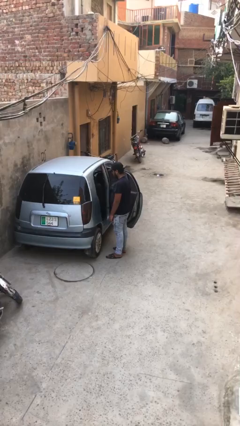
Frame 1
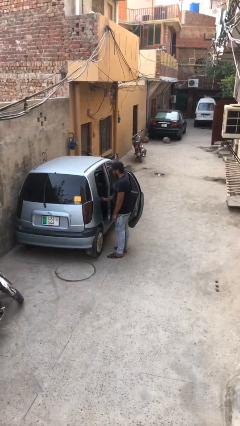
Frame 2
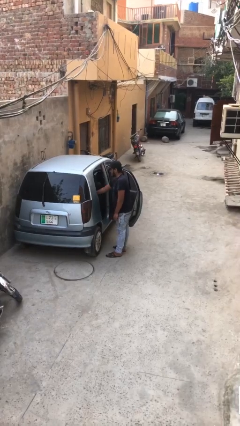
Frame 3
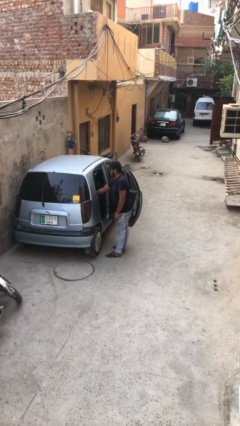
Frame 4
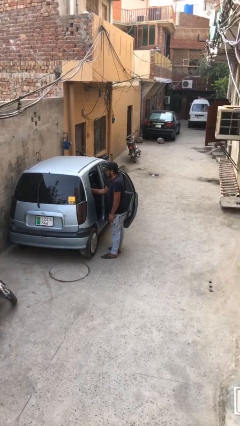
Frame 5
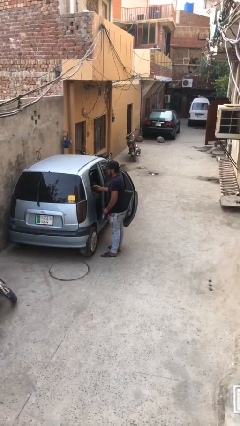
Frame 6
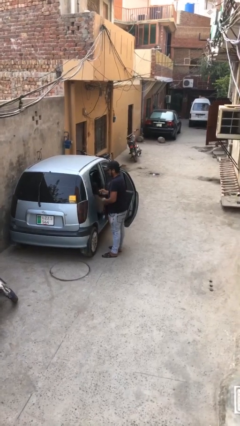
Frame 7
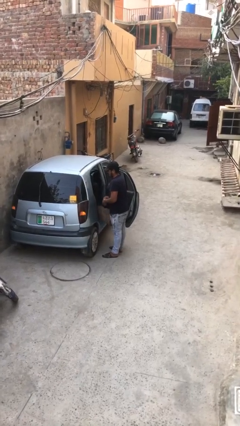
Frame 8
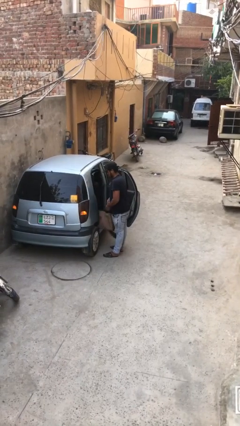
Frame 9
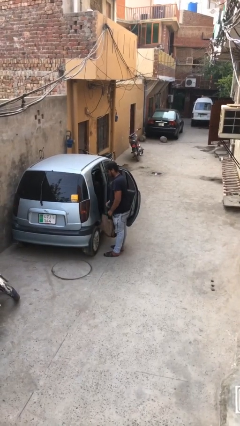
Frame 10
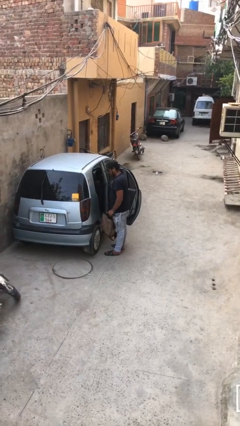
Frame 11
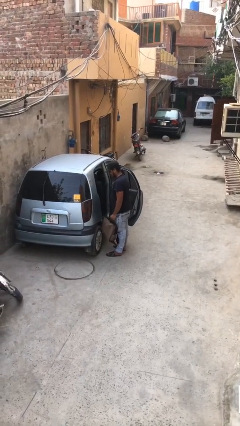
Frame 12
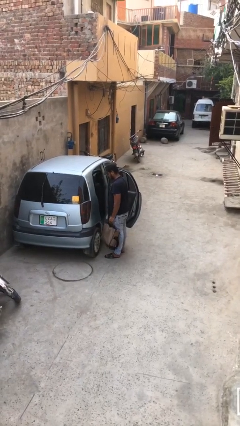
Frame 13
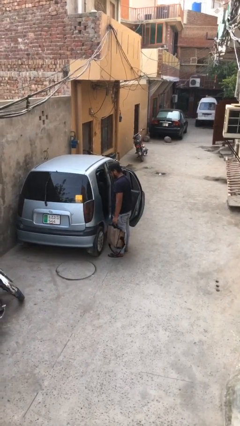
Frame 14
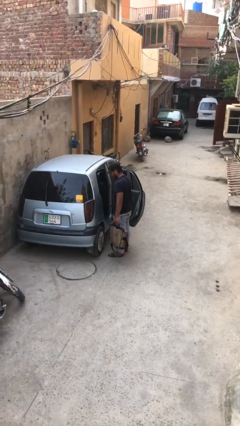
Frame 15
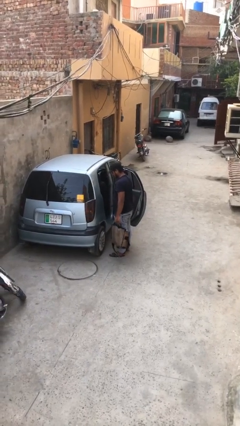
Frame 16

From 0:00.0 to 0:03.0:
person unloads car

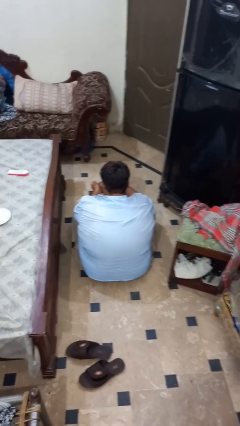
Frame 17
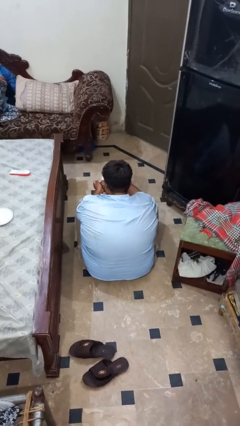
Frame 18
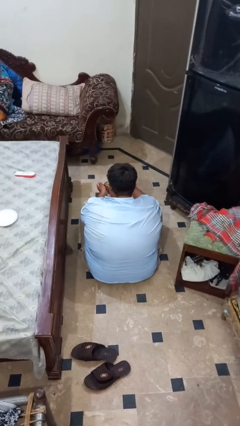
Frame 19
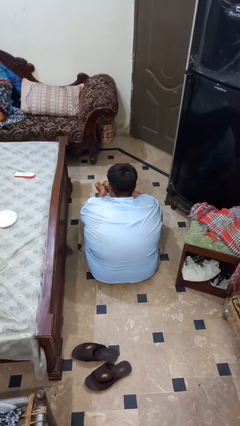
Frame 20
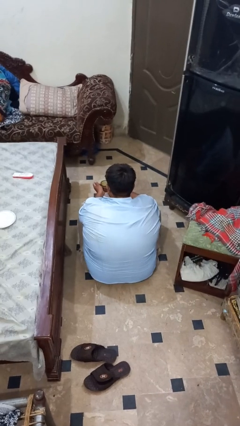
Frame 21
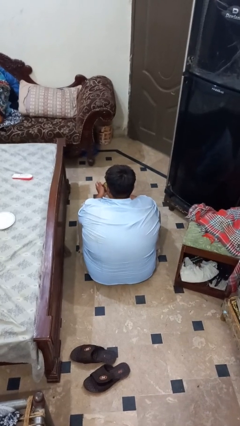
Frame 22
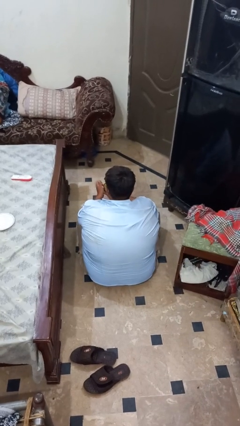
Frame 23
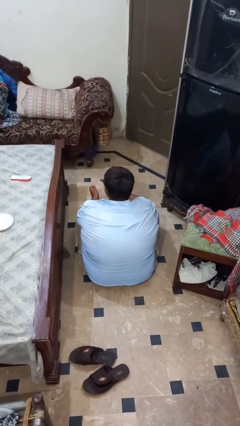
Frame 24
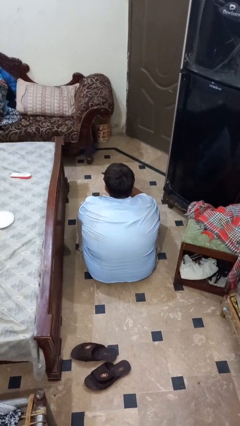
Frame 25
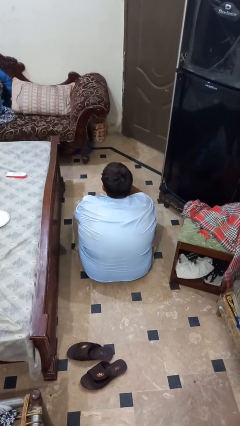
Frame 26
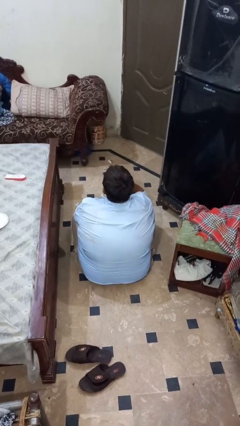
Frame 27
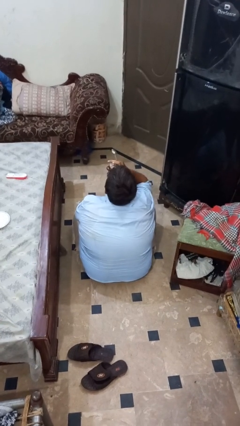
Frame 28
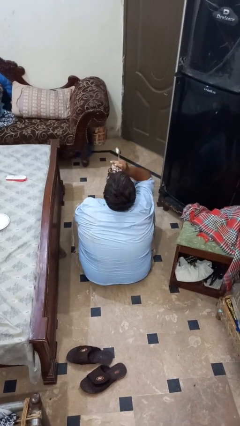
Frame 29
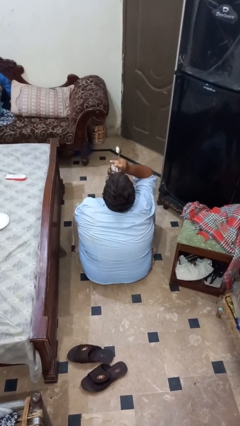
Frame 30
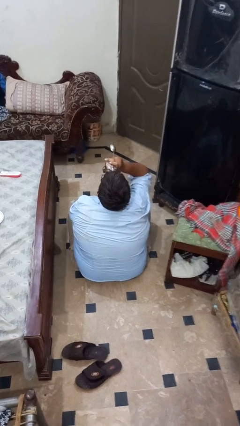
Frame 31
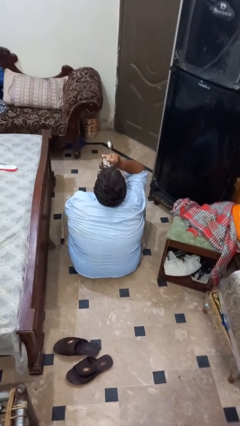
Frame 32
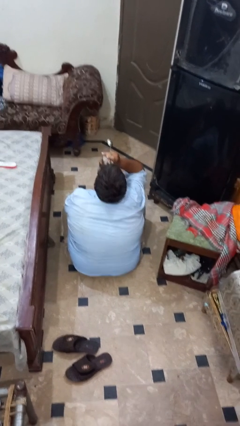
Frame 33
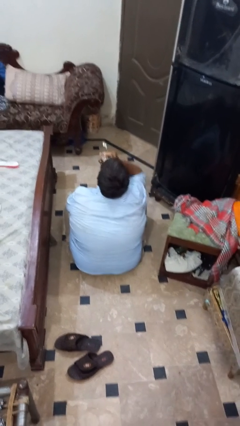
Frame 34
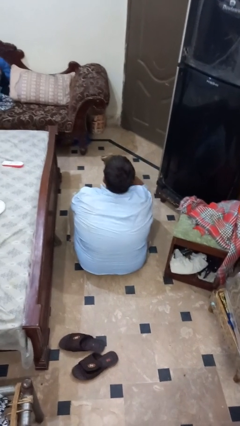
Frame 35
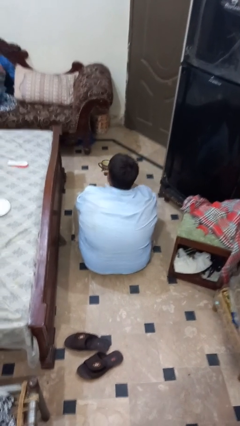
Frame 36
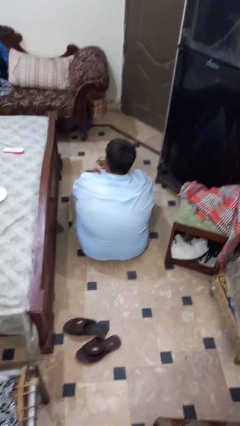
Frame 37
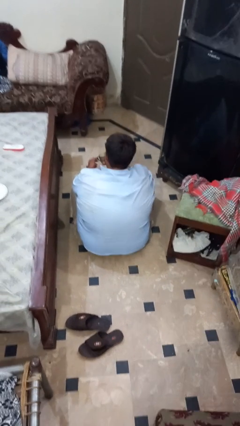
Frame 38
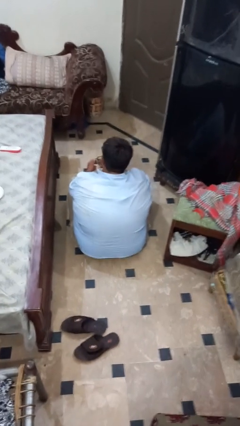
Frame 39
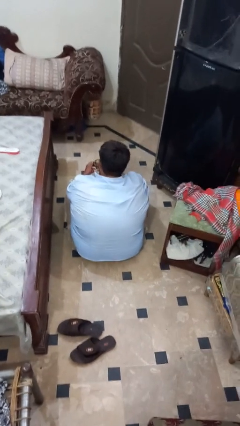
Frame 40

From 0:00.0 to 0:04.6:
person drinks from mug

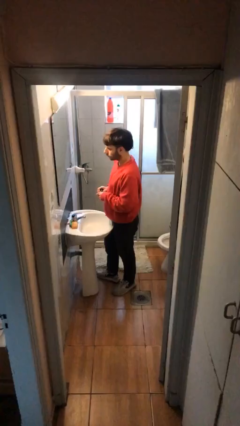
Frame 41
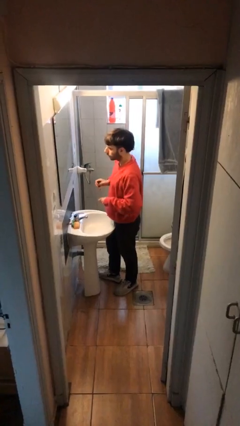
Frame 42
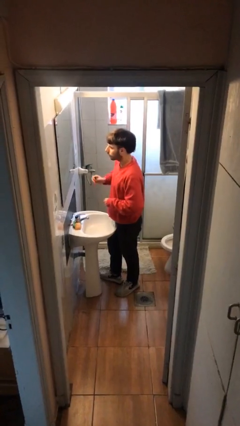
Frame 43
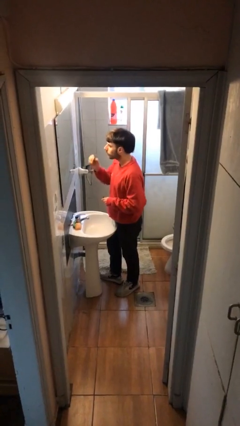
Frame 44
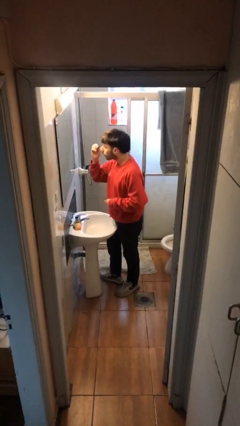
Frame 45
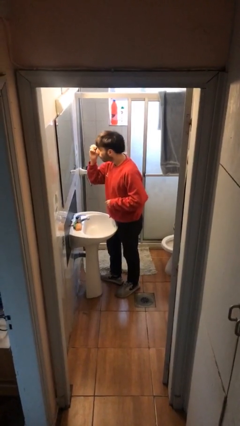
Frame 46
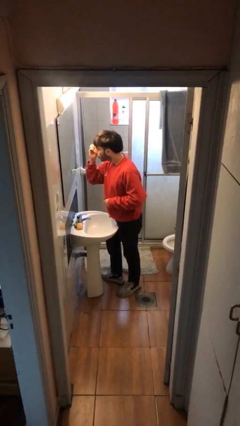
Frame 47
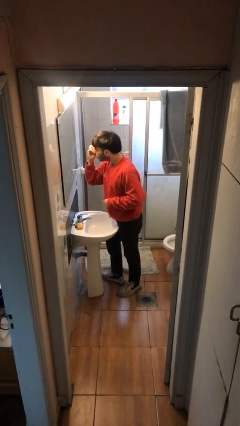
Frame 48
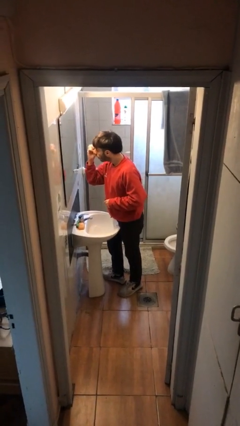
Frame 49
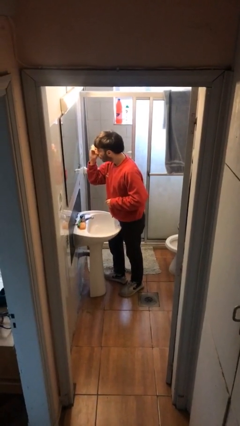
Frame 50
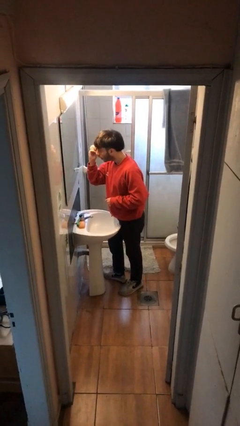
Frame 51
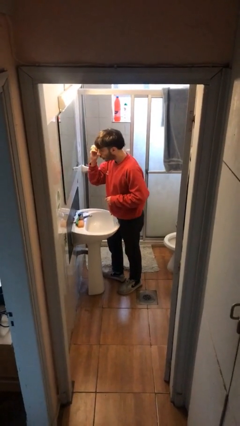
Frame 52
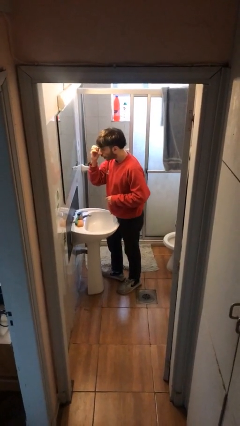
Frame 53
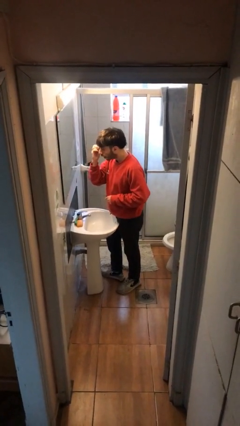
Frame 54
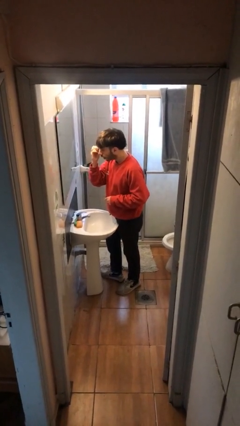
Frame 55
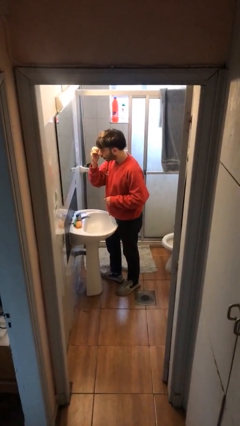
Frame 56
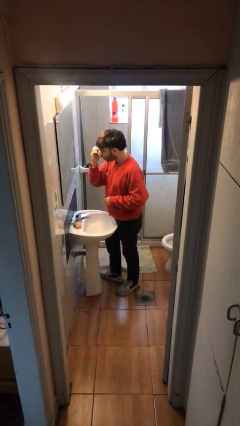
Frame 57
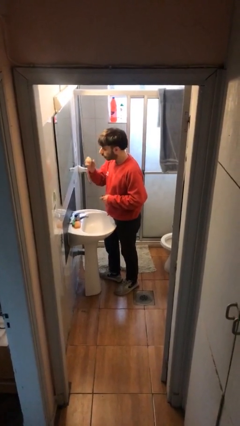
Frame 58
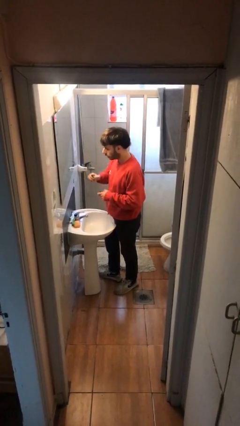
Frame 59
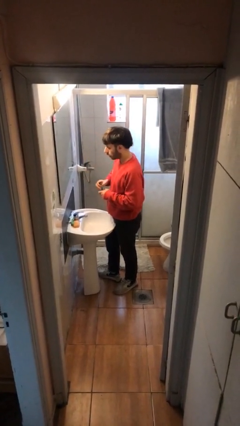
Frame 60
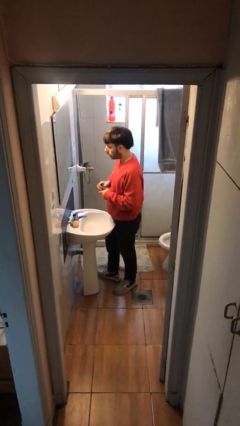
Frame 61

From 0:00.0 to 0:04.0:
person applies eye makeup

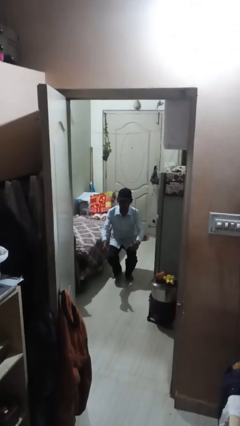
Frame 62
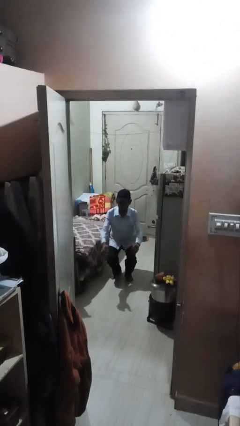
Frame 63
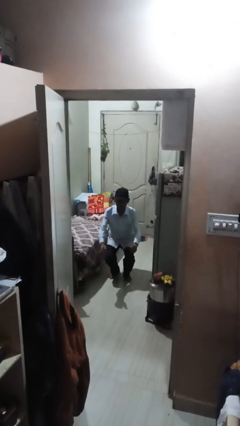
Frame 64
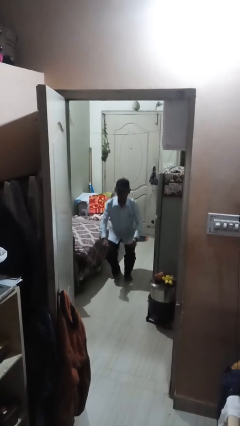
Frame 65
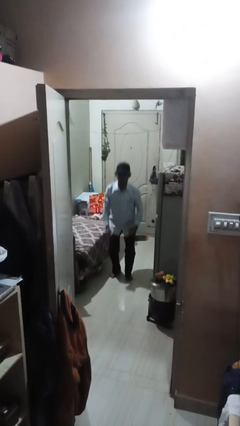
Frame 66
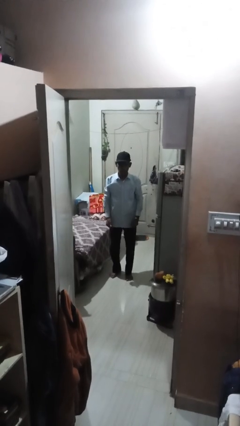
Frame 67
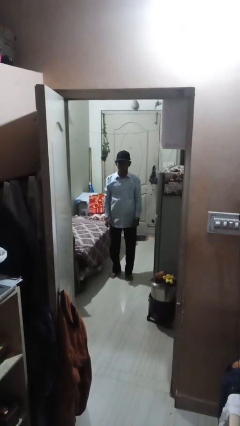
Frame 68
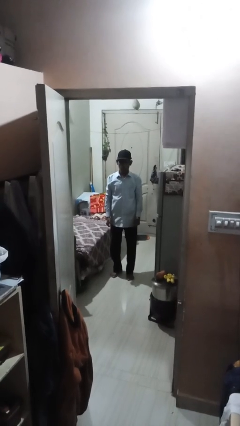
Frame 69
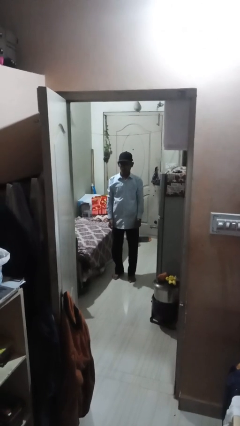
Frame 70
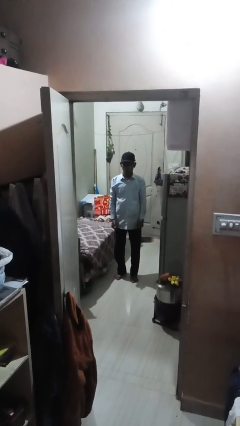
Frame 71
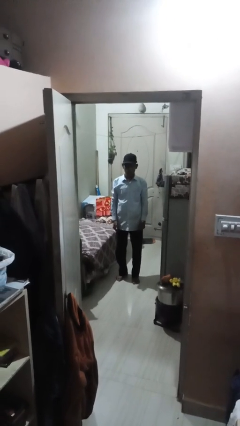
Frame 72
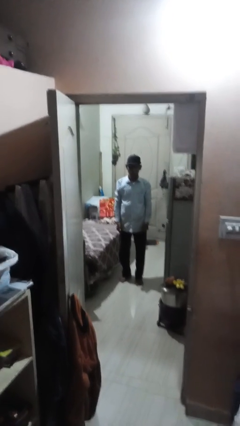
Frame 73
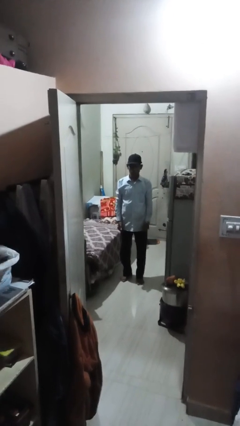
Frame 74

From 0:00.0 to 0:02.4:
person stands up

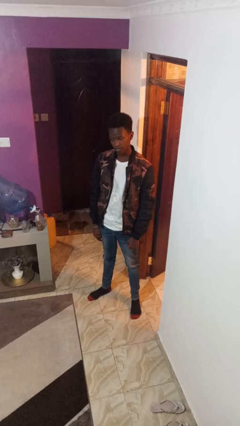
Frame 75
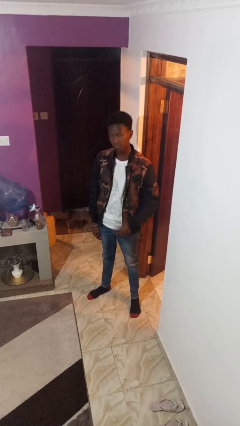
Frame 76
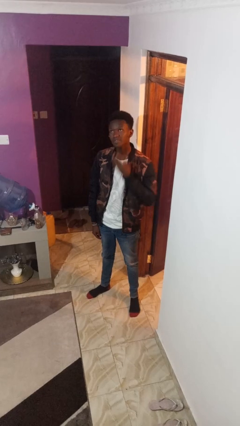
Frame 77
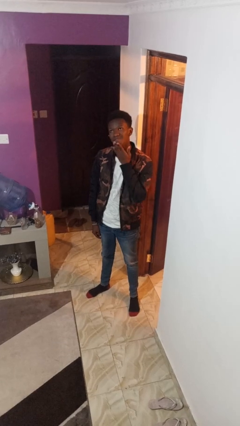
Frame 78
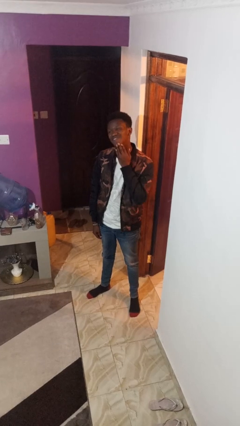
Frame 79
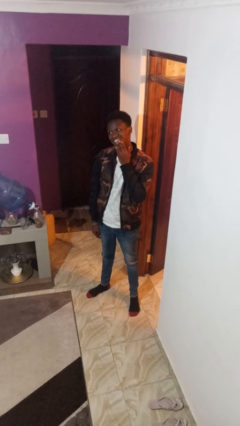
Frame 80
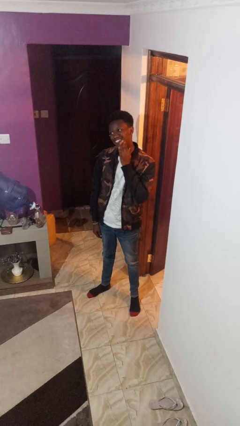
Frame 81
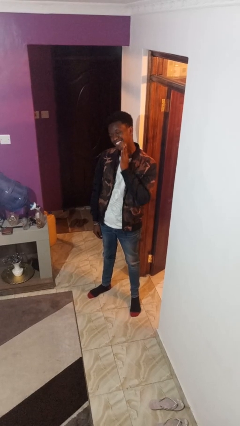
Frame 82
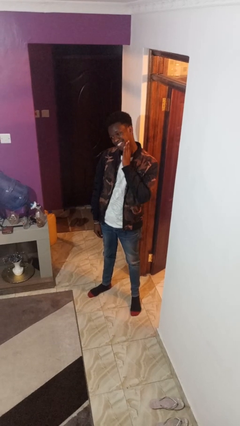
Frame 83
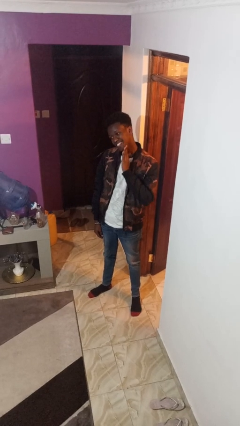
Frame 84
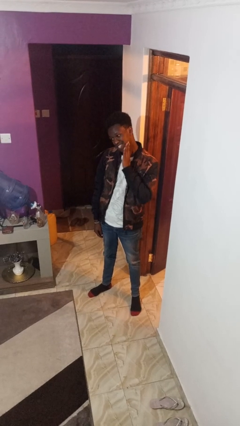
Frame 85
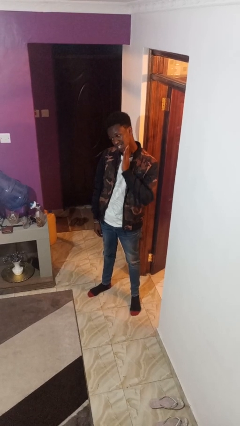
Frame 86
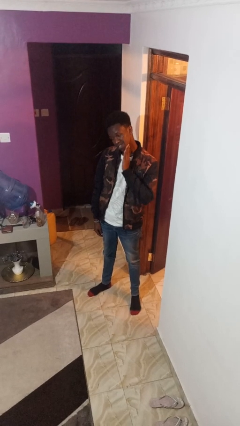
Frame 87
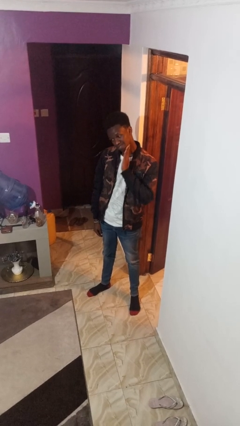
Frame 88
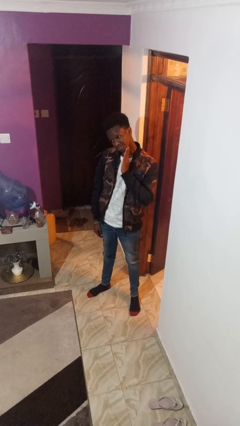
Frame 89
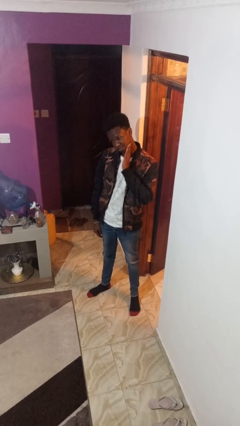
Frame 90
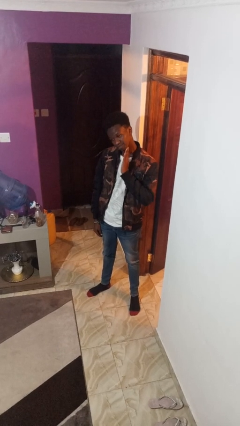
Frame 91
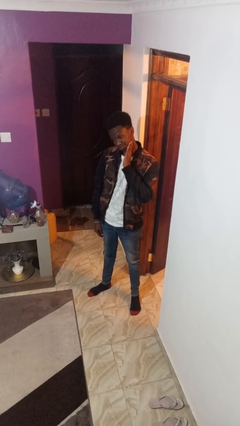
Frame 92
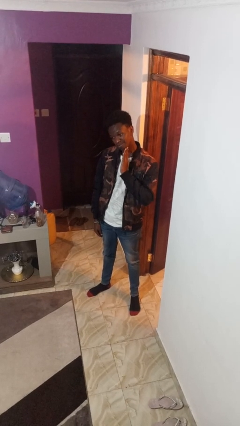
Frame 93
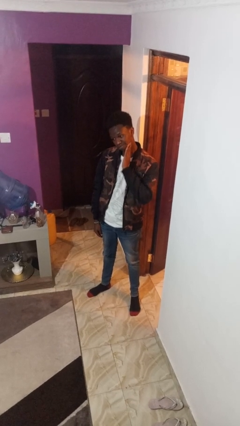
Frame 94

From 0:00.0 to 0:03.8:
person scratches face
